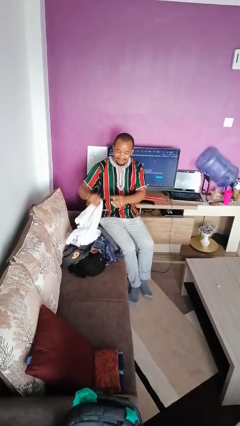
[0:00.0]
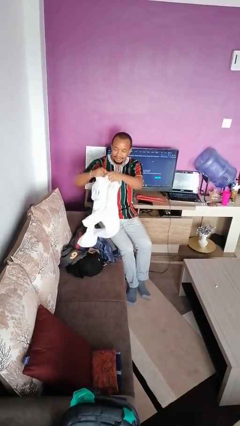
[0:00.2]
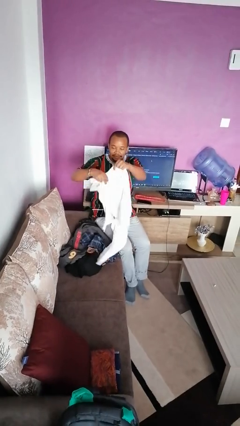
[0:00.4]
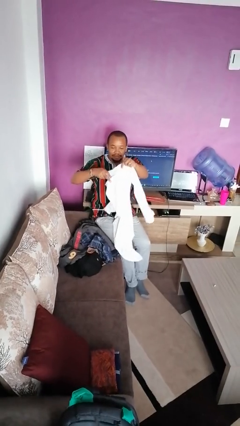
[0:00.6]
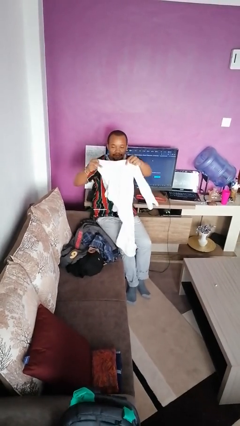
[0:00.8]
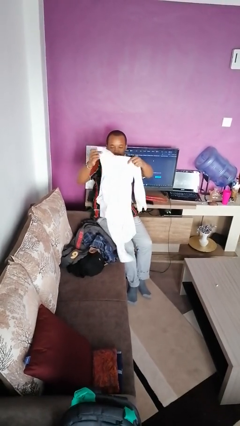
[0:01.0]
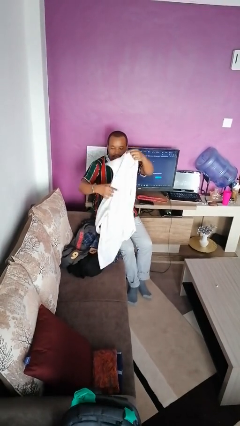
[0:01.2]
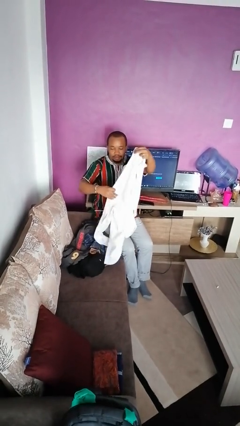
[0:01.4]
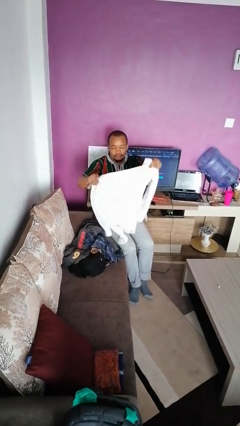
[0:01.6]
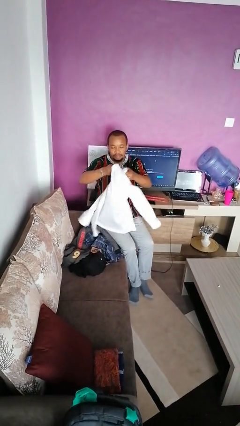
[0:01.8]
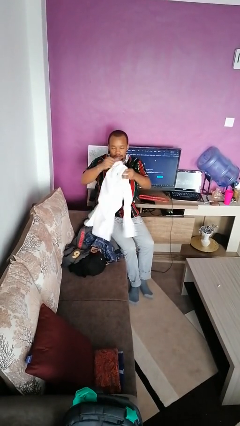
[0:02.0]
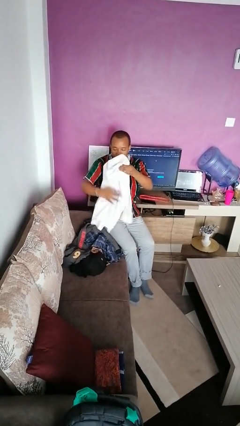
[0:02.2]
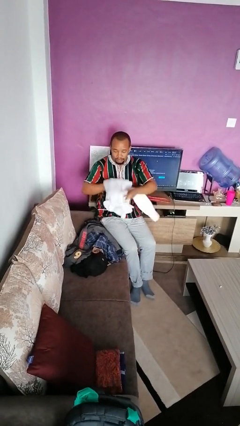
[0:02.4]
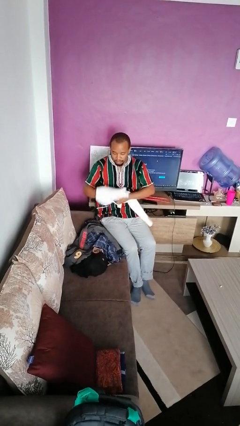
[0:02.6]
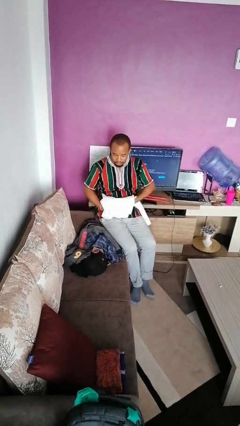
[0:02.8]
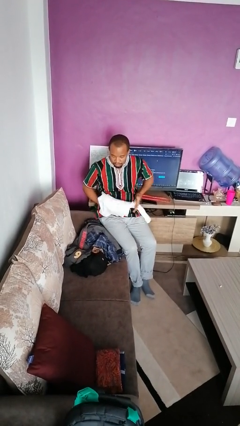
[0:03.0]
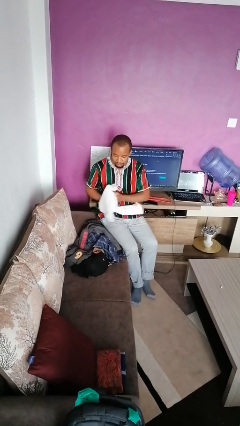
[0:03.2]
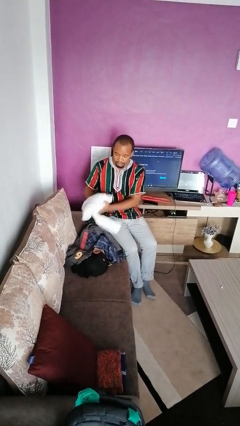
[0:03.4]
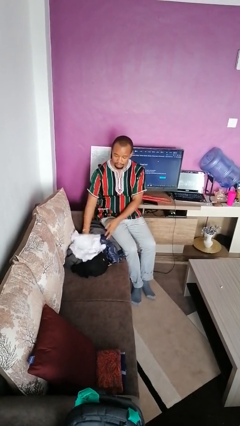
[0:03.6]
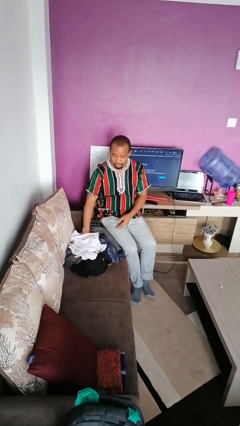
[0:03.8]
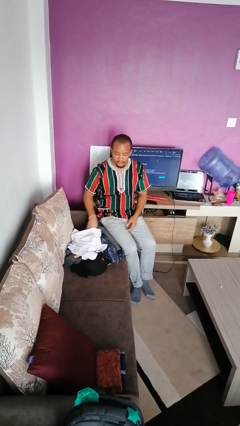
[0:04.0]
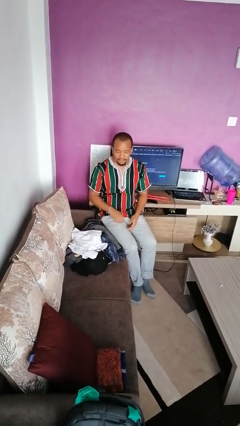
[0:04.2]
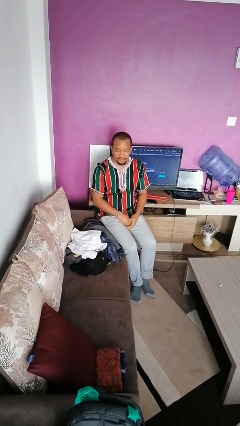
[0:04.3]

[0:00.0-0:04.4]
person folds shirt

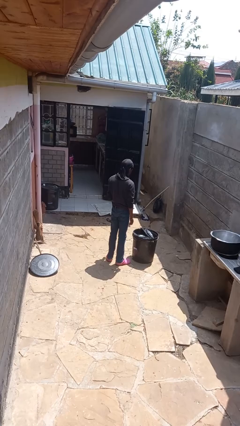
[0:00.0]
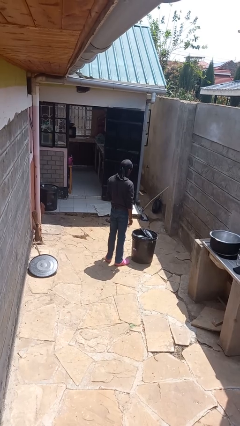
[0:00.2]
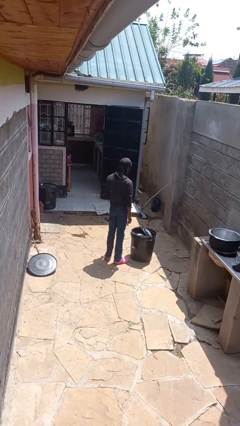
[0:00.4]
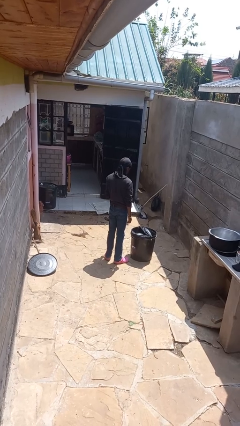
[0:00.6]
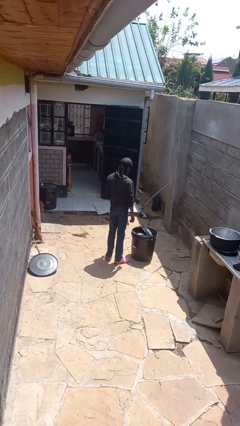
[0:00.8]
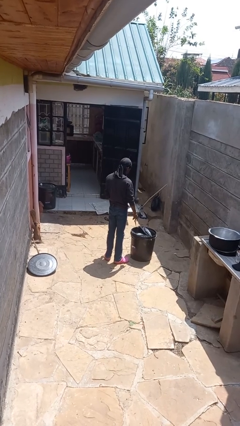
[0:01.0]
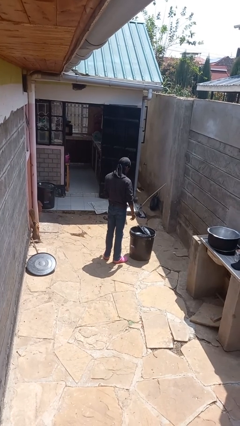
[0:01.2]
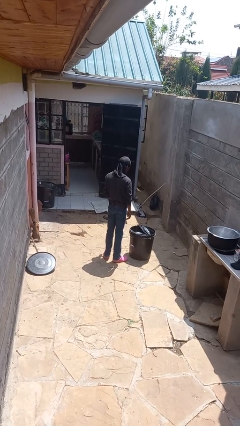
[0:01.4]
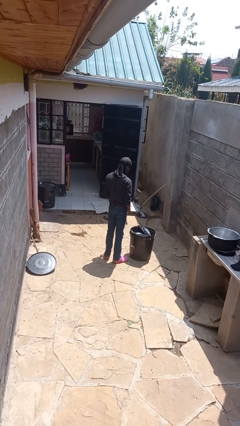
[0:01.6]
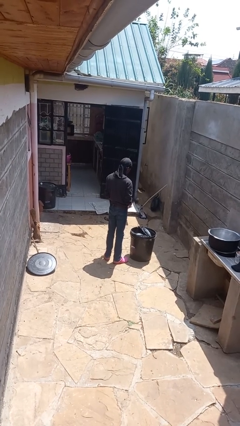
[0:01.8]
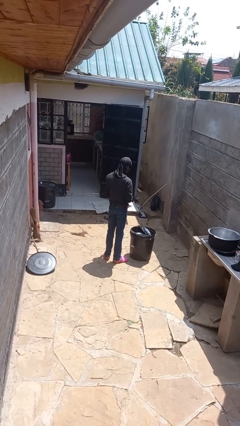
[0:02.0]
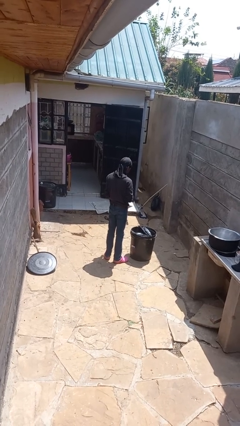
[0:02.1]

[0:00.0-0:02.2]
person discards trash

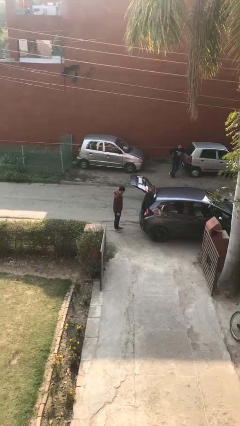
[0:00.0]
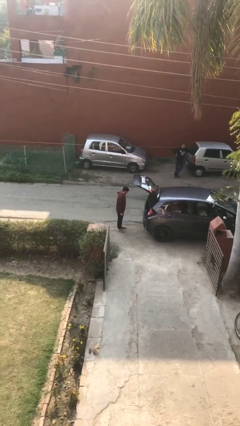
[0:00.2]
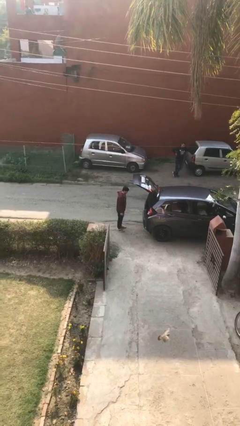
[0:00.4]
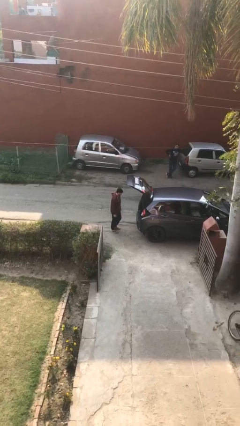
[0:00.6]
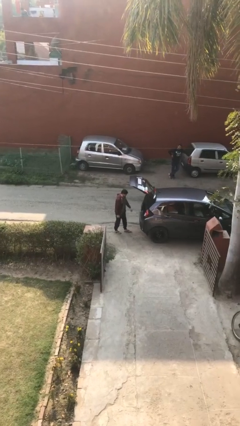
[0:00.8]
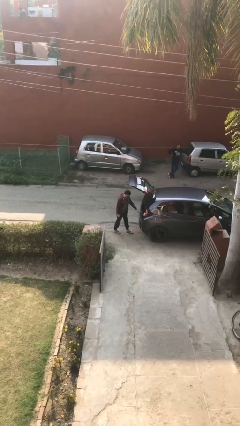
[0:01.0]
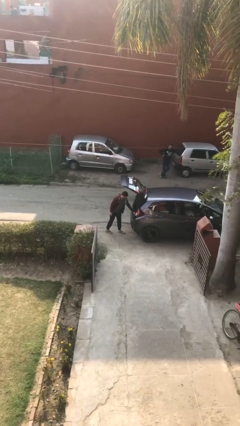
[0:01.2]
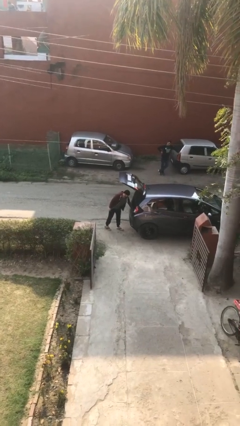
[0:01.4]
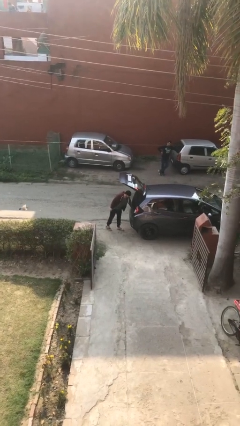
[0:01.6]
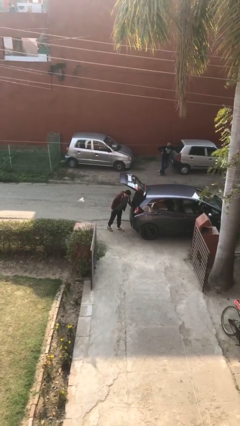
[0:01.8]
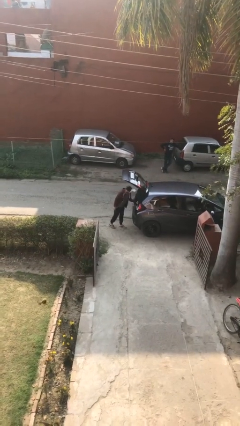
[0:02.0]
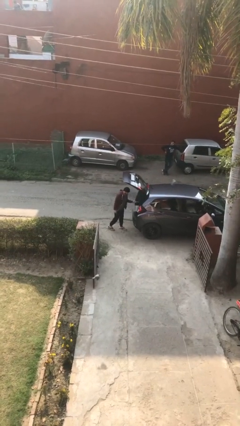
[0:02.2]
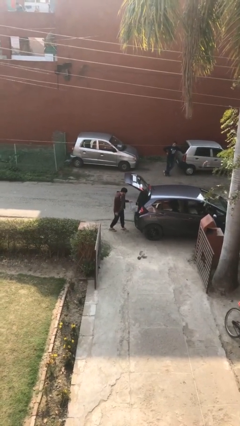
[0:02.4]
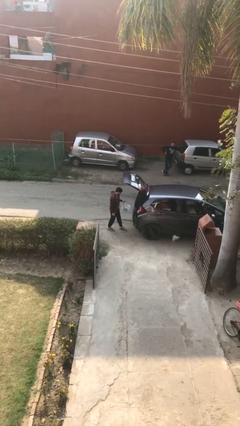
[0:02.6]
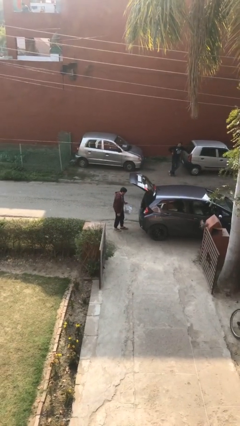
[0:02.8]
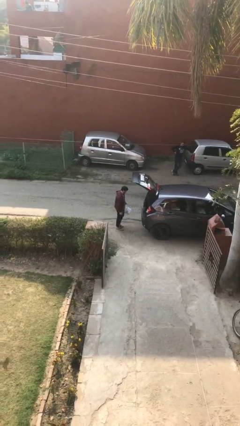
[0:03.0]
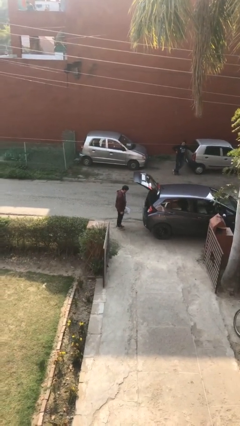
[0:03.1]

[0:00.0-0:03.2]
person unloads car

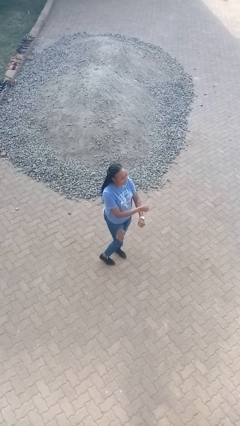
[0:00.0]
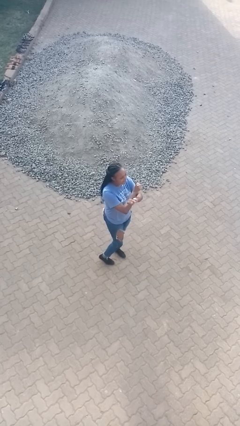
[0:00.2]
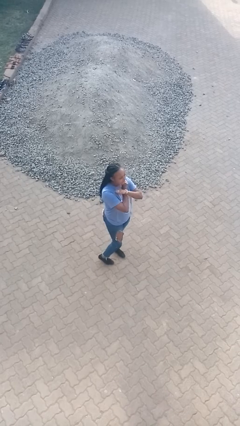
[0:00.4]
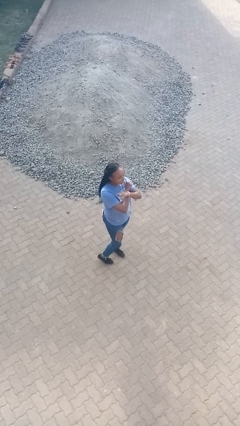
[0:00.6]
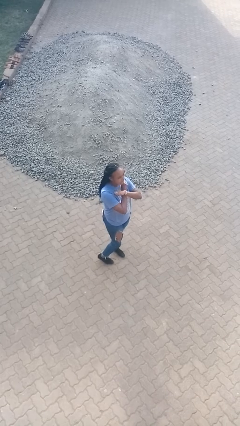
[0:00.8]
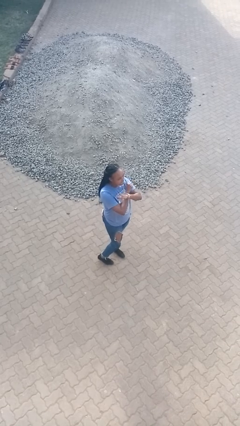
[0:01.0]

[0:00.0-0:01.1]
person gestures arms x

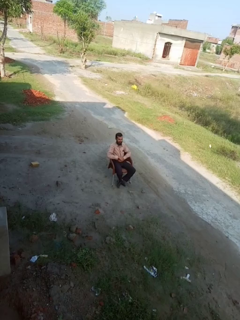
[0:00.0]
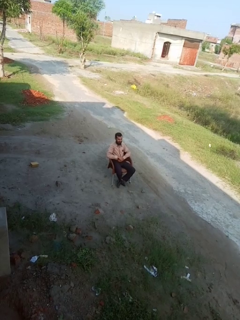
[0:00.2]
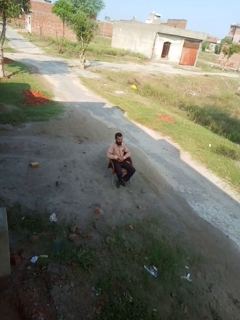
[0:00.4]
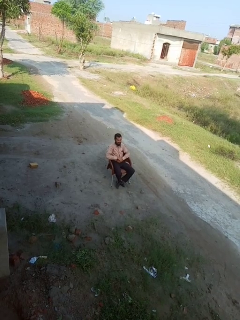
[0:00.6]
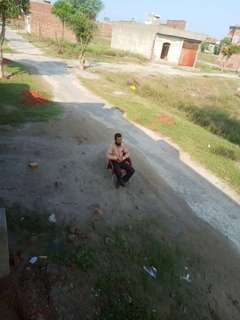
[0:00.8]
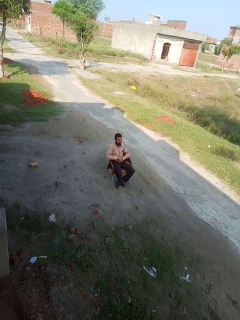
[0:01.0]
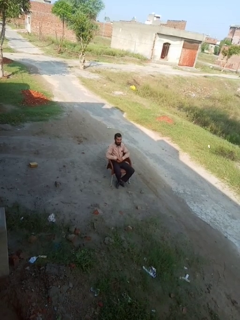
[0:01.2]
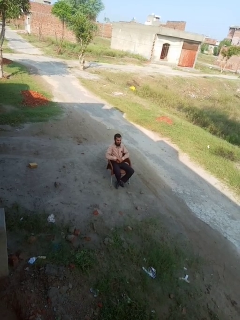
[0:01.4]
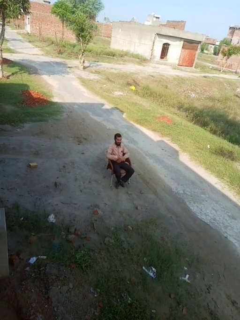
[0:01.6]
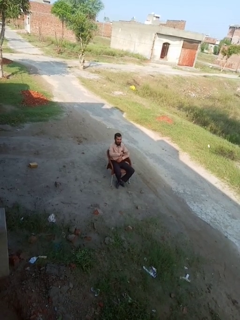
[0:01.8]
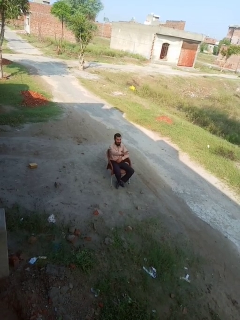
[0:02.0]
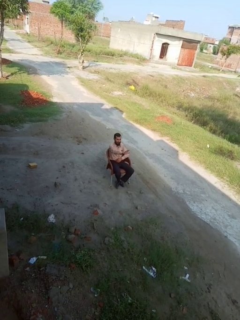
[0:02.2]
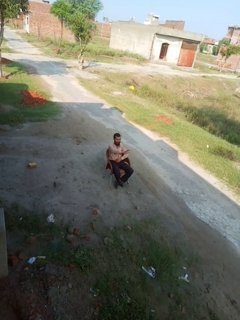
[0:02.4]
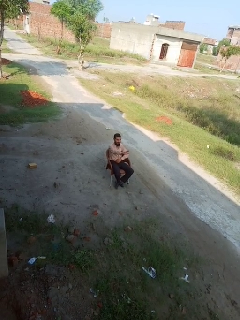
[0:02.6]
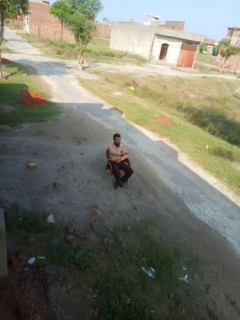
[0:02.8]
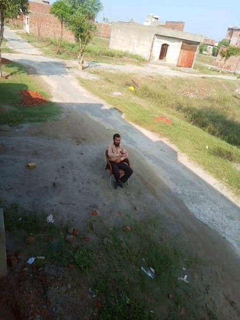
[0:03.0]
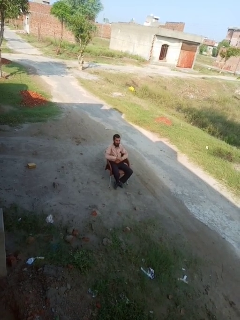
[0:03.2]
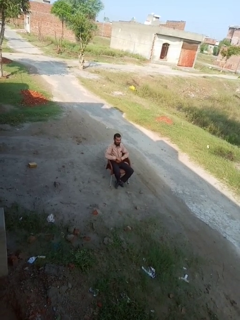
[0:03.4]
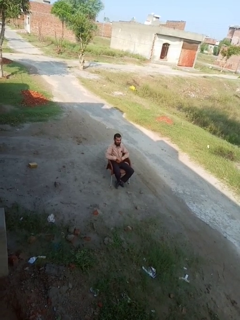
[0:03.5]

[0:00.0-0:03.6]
person gestures stop

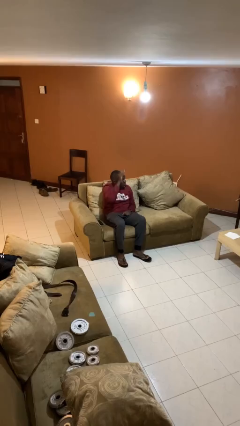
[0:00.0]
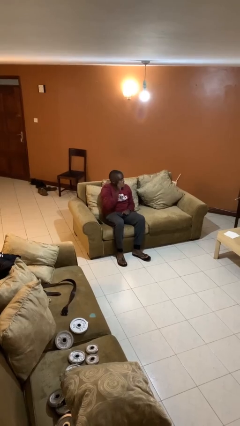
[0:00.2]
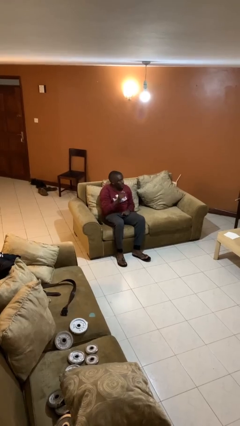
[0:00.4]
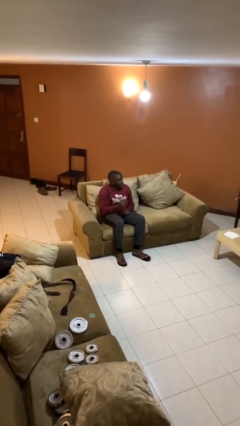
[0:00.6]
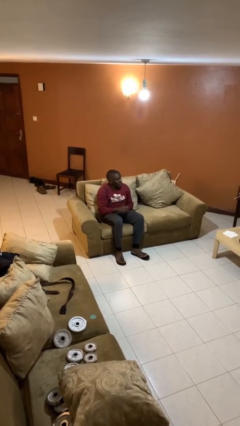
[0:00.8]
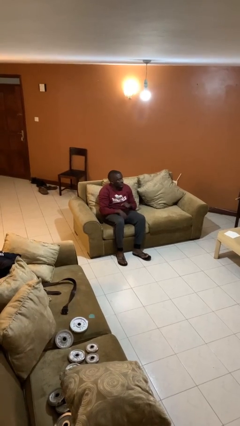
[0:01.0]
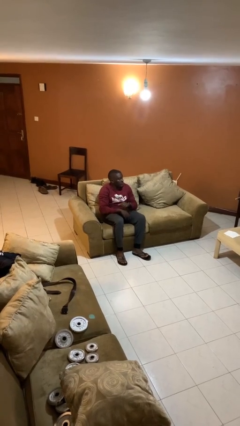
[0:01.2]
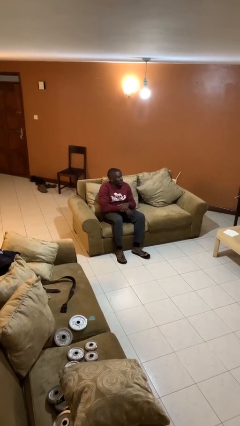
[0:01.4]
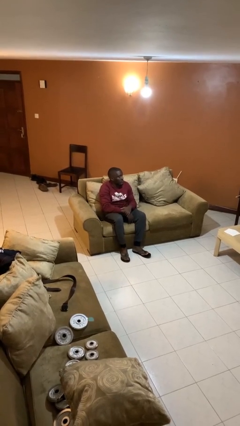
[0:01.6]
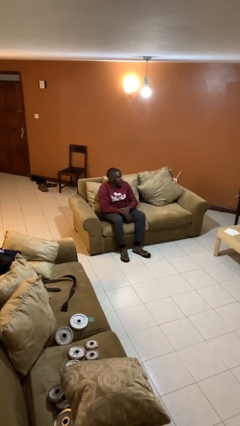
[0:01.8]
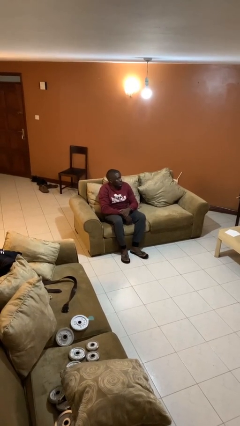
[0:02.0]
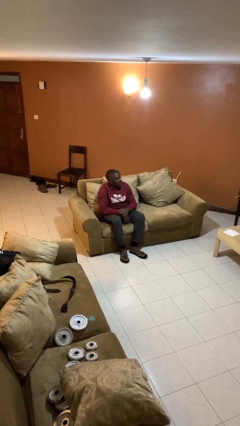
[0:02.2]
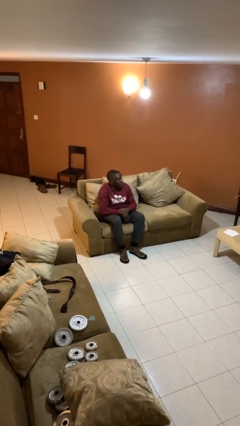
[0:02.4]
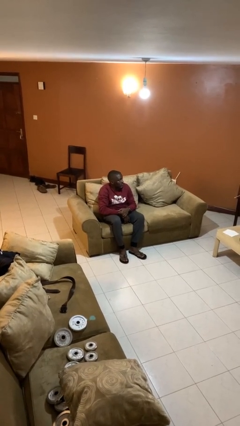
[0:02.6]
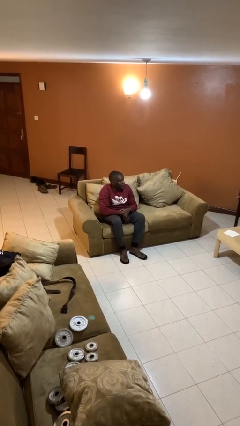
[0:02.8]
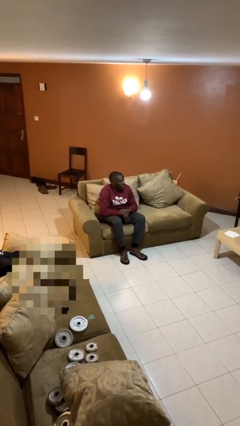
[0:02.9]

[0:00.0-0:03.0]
person gestures lower hand

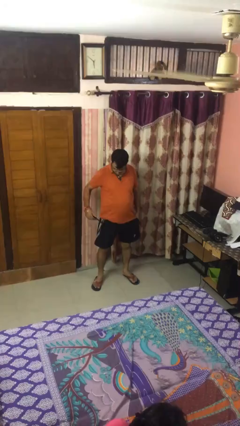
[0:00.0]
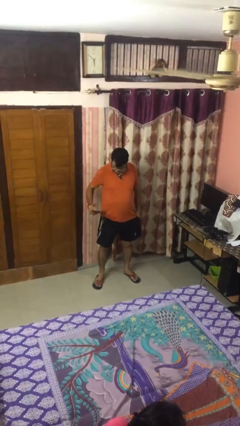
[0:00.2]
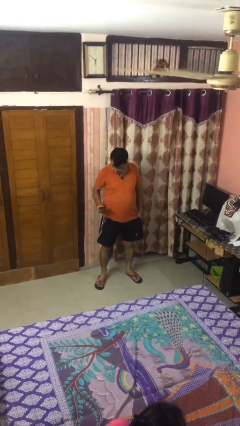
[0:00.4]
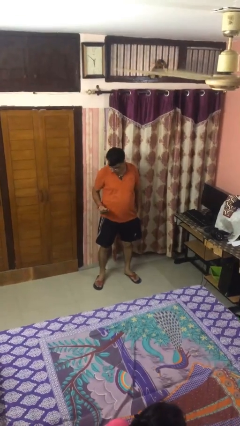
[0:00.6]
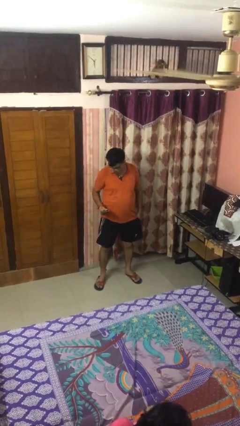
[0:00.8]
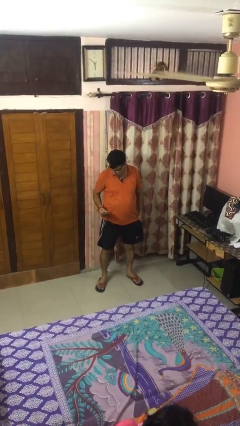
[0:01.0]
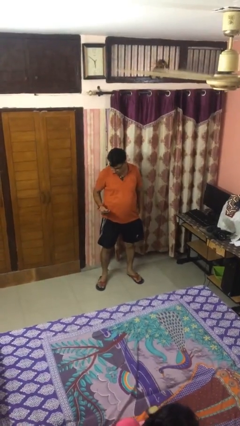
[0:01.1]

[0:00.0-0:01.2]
person takes phone from pocket
